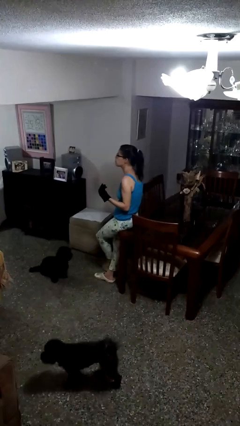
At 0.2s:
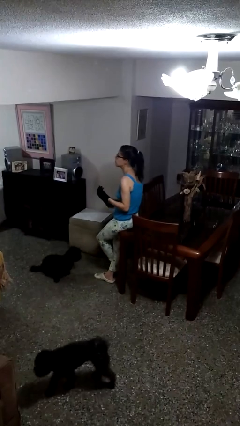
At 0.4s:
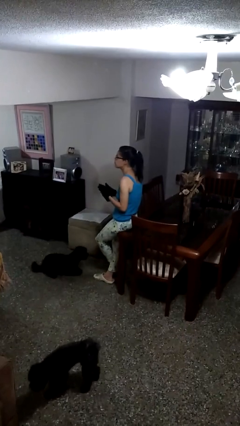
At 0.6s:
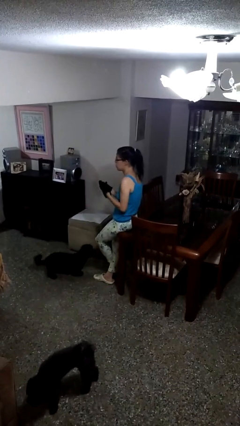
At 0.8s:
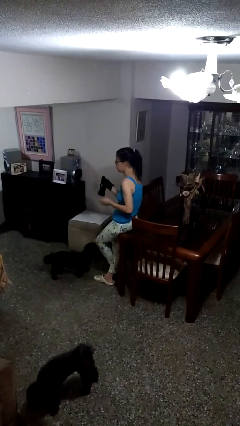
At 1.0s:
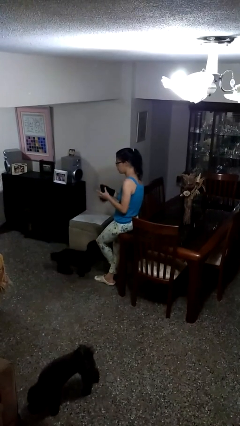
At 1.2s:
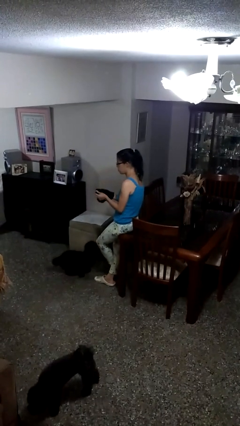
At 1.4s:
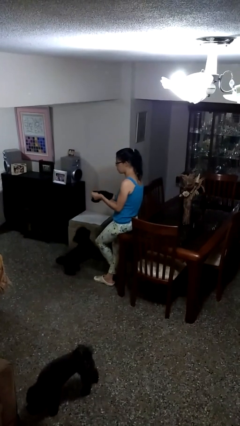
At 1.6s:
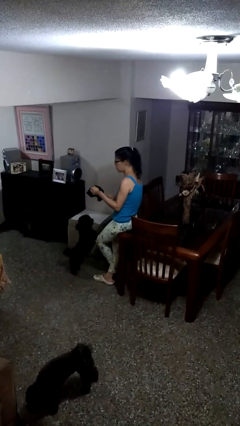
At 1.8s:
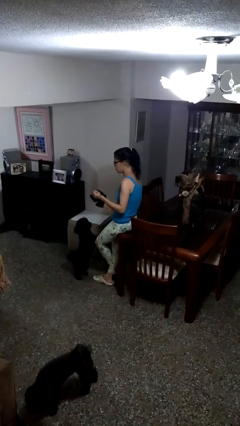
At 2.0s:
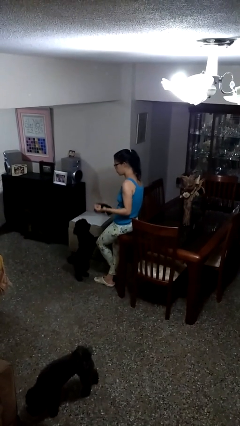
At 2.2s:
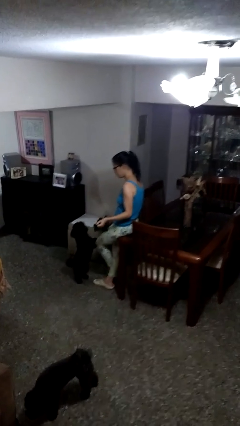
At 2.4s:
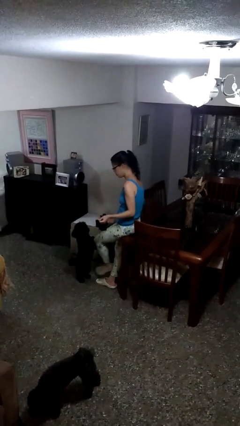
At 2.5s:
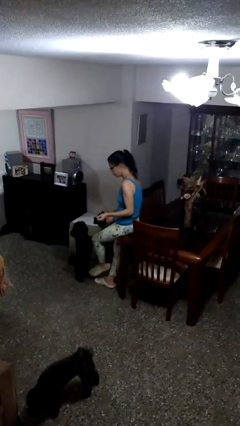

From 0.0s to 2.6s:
person takes off gloves

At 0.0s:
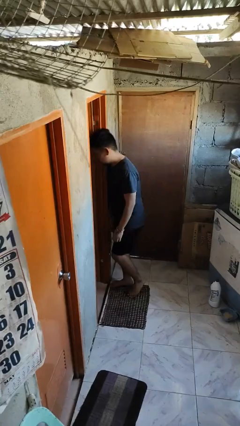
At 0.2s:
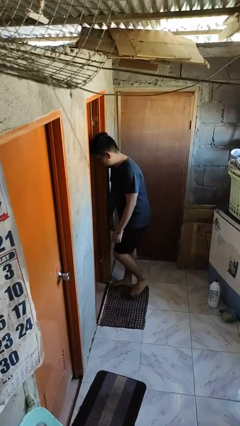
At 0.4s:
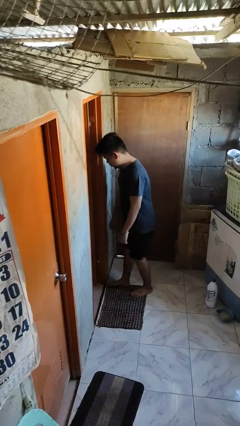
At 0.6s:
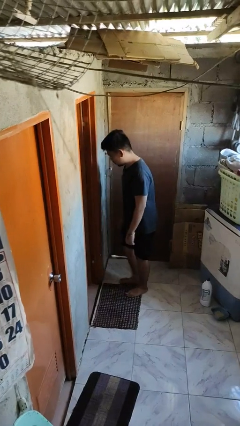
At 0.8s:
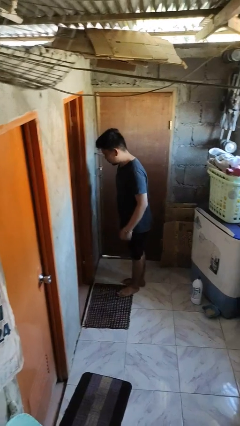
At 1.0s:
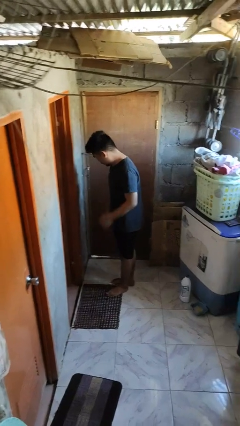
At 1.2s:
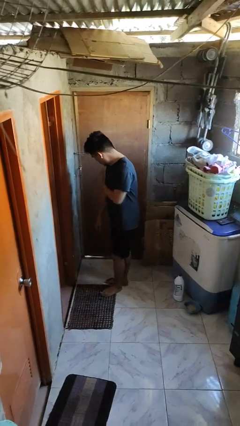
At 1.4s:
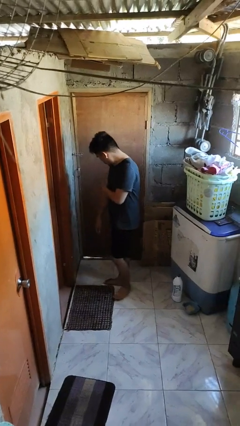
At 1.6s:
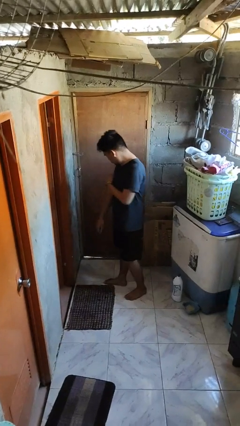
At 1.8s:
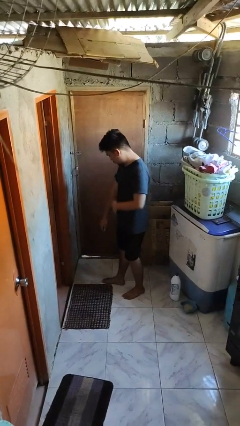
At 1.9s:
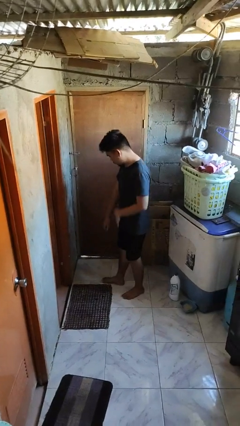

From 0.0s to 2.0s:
person bumps into wall

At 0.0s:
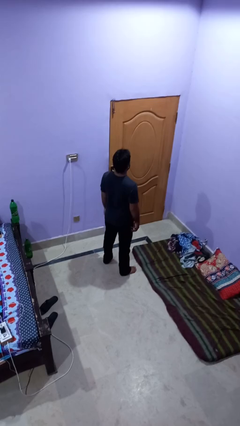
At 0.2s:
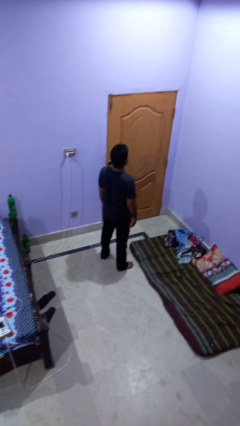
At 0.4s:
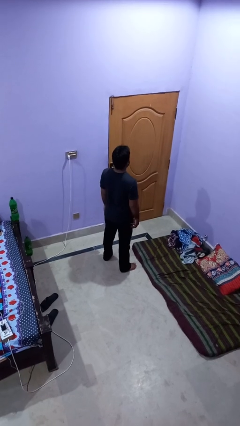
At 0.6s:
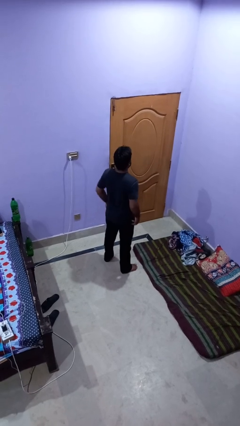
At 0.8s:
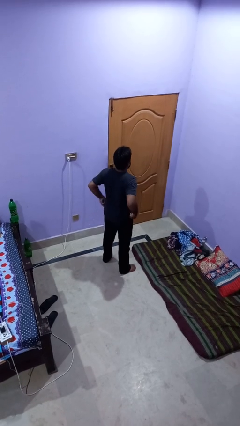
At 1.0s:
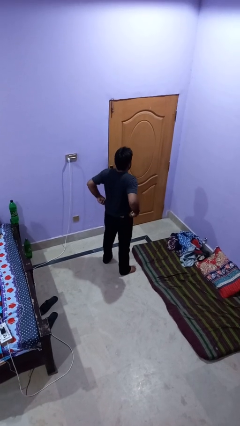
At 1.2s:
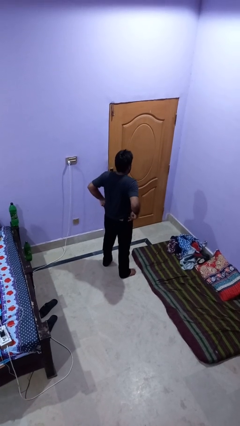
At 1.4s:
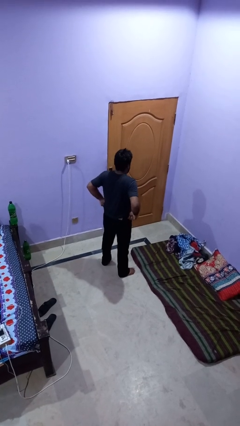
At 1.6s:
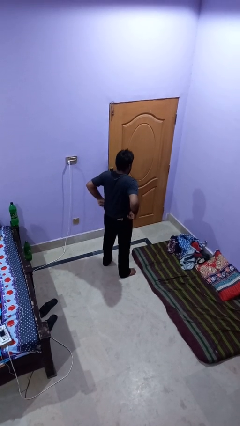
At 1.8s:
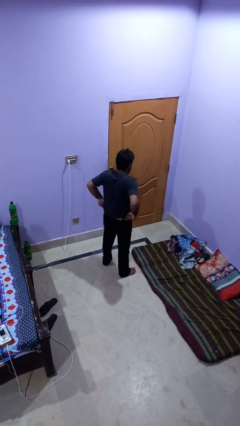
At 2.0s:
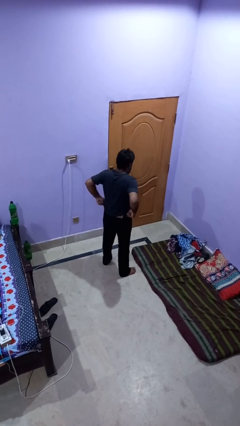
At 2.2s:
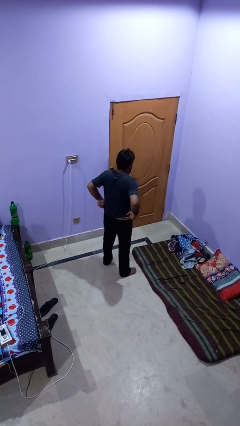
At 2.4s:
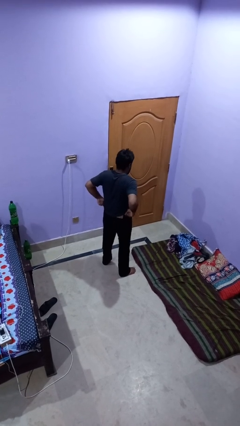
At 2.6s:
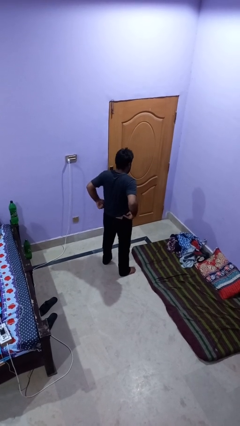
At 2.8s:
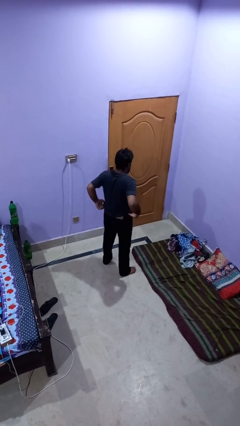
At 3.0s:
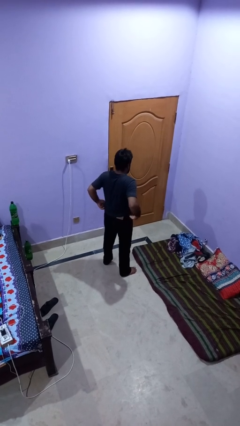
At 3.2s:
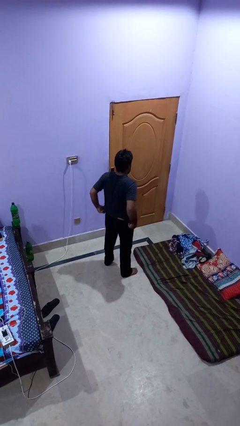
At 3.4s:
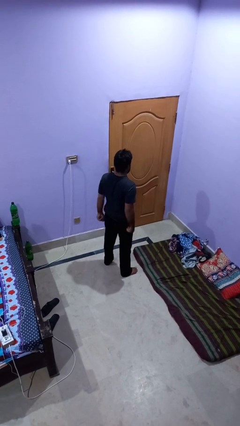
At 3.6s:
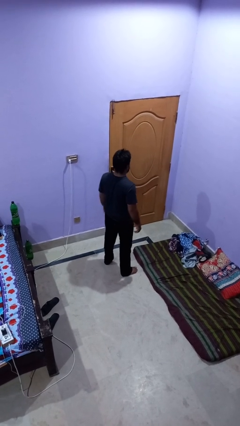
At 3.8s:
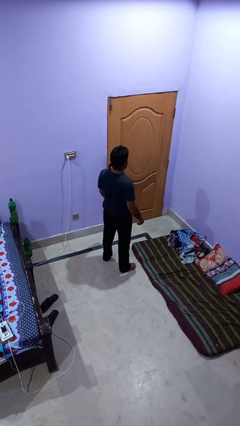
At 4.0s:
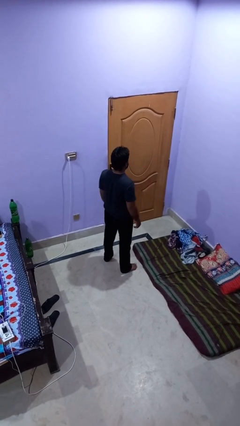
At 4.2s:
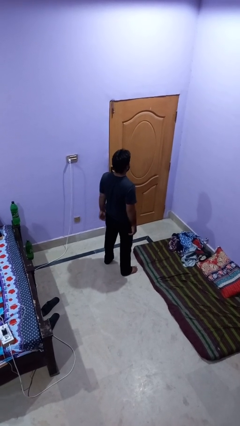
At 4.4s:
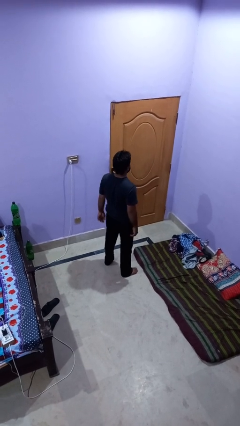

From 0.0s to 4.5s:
person hikes up pants

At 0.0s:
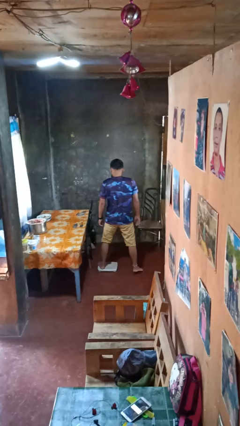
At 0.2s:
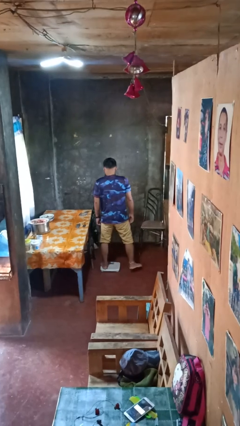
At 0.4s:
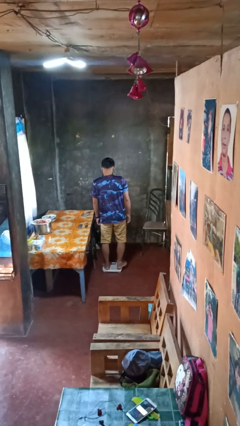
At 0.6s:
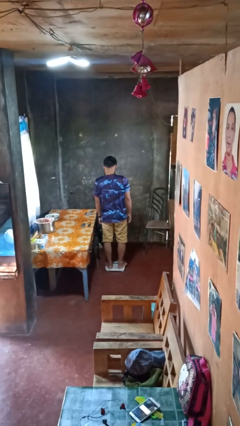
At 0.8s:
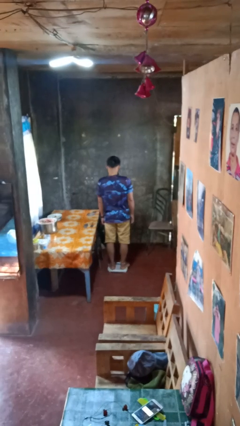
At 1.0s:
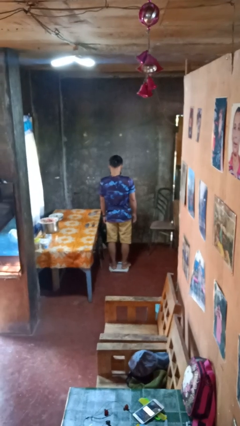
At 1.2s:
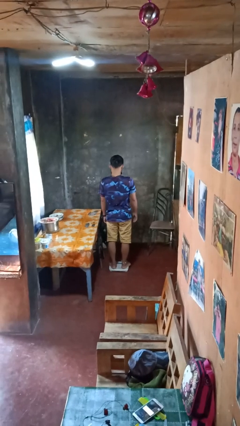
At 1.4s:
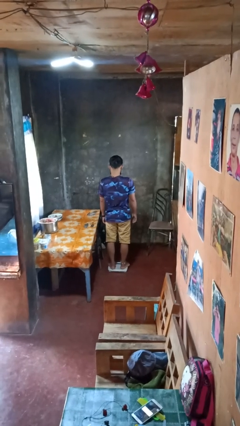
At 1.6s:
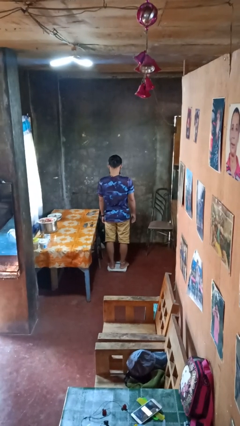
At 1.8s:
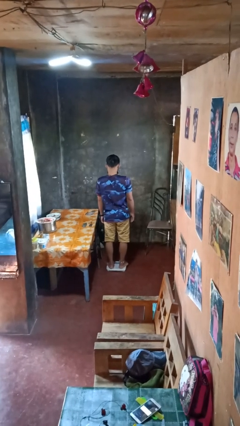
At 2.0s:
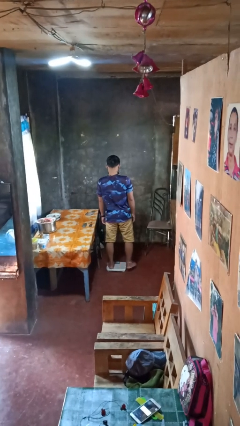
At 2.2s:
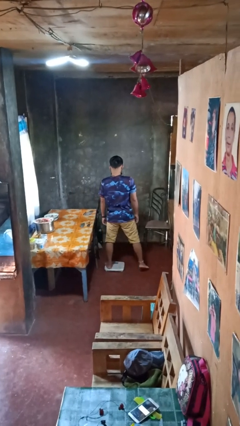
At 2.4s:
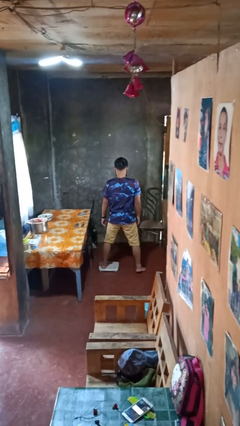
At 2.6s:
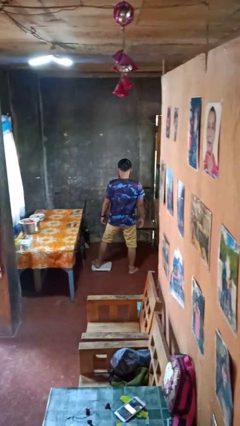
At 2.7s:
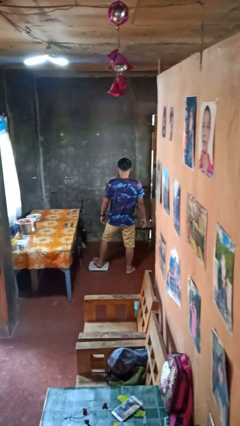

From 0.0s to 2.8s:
person uses bodyweight scale

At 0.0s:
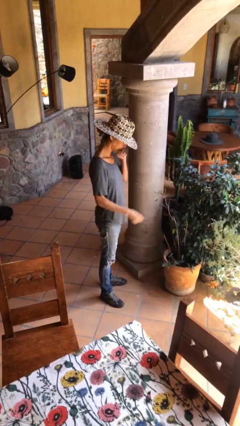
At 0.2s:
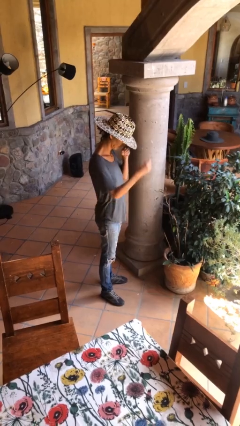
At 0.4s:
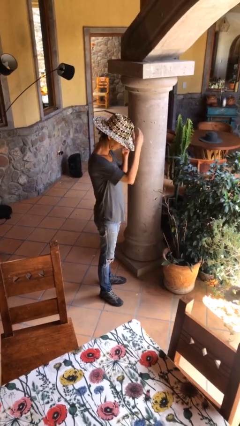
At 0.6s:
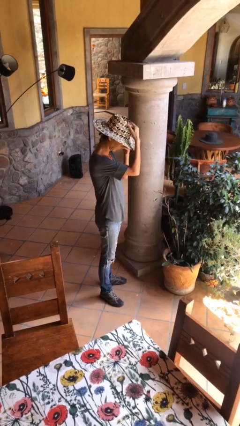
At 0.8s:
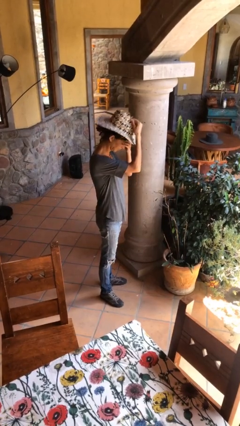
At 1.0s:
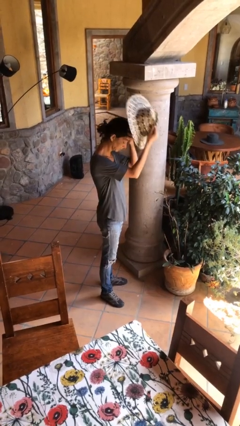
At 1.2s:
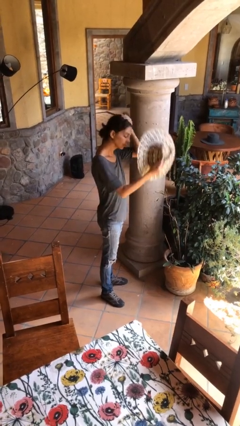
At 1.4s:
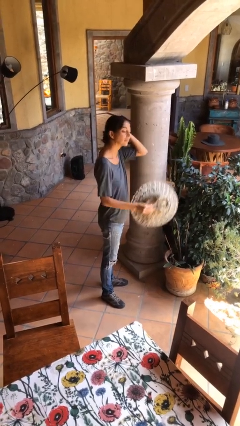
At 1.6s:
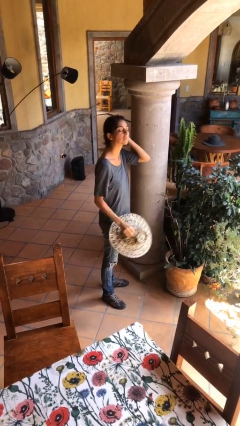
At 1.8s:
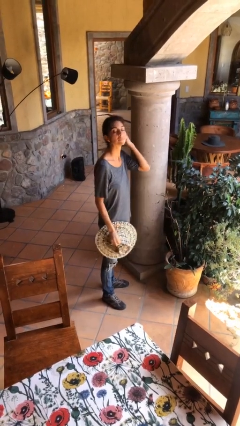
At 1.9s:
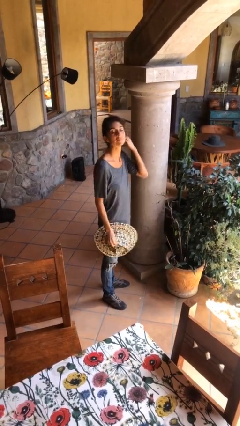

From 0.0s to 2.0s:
person takes off hat

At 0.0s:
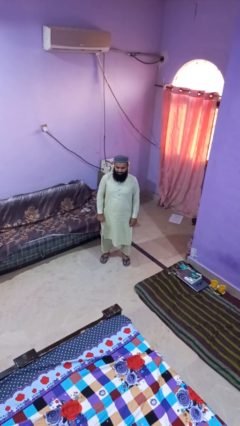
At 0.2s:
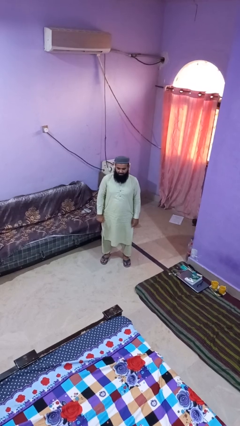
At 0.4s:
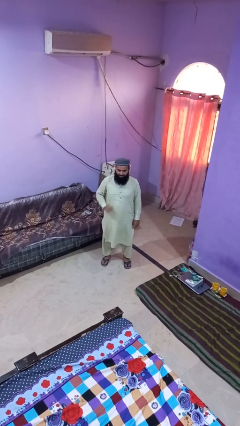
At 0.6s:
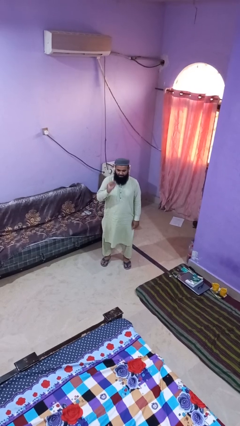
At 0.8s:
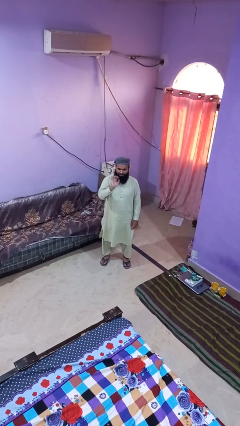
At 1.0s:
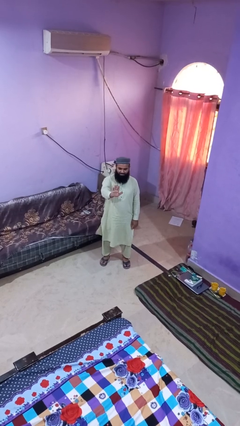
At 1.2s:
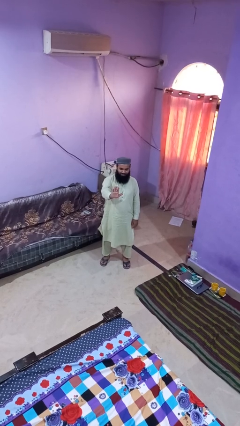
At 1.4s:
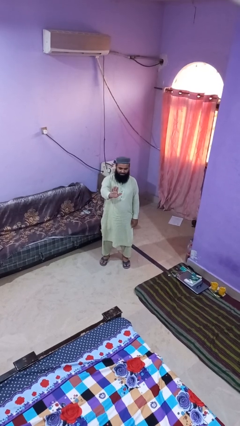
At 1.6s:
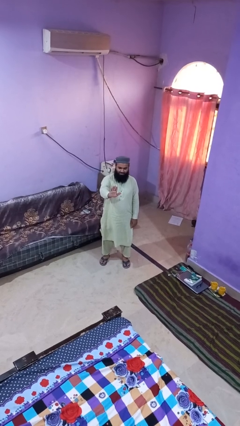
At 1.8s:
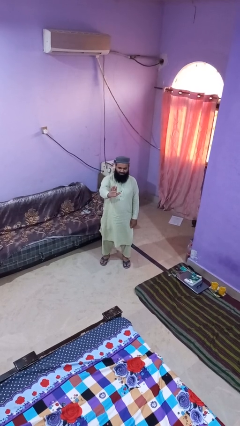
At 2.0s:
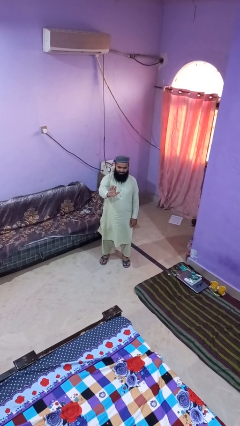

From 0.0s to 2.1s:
person gestures stop

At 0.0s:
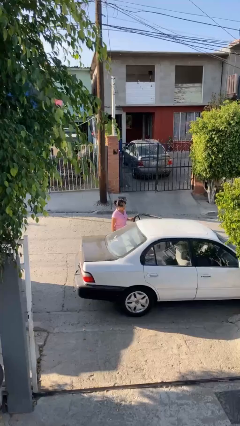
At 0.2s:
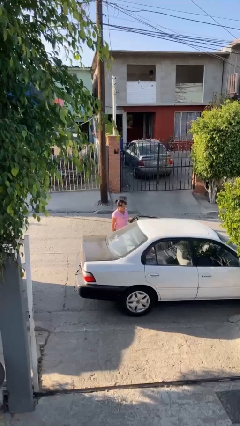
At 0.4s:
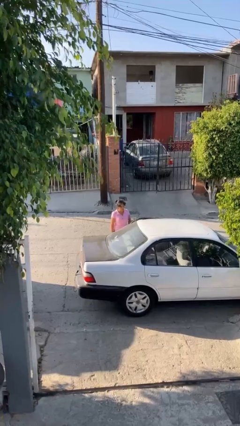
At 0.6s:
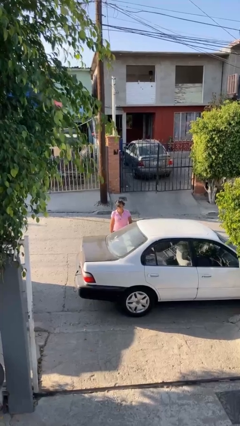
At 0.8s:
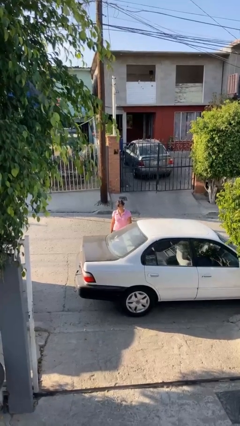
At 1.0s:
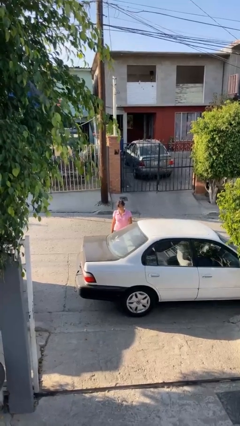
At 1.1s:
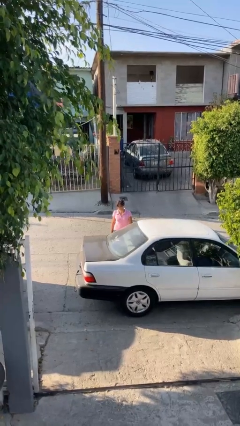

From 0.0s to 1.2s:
person closes car door
